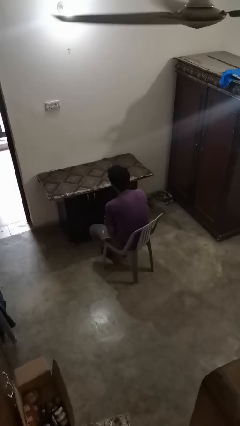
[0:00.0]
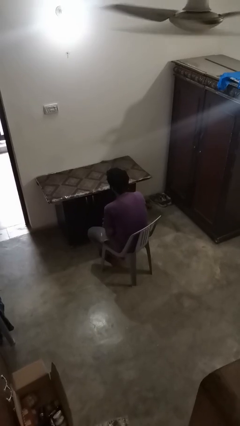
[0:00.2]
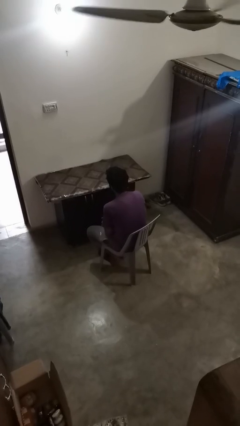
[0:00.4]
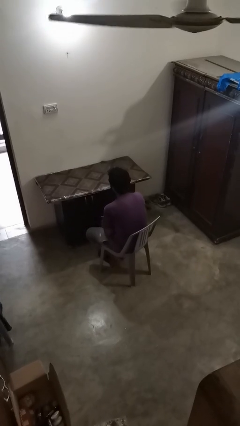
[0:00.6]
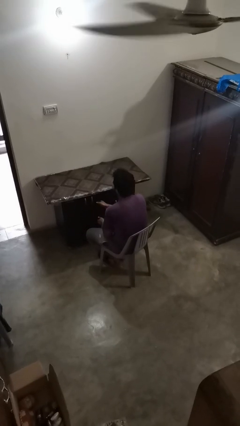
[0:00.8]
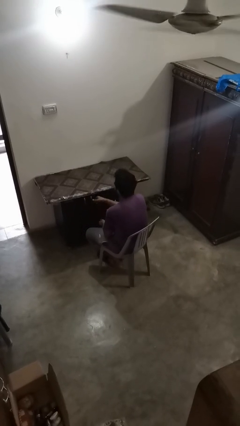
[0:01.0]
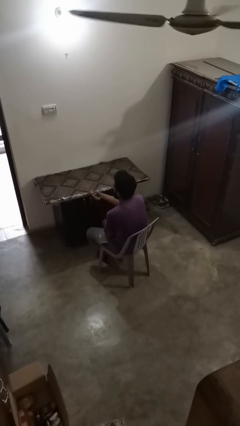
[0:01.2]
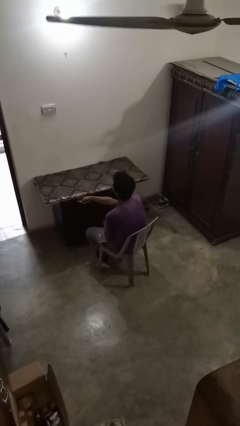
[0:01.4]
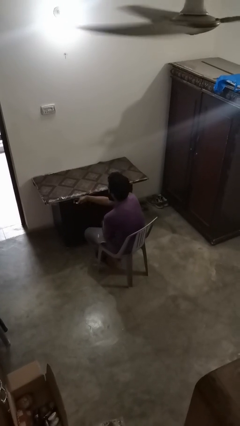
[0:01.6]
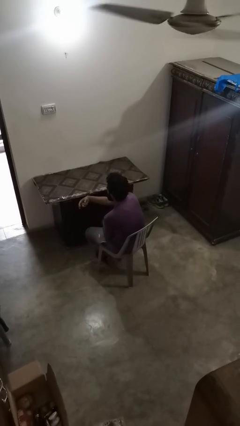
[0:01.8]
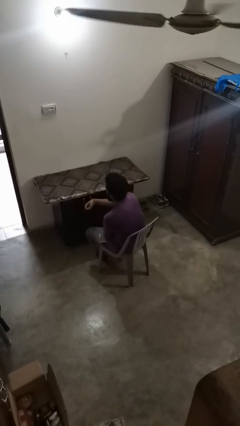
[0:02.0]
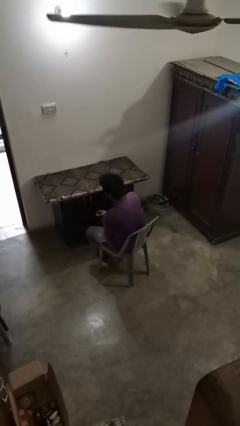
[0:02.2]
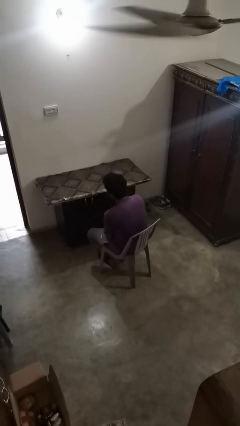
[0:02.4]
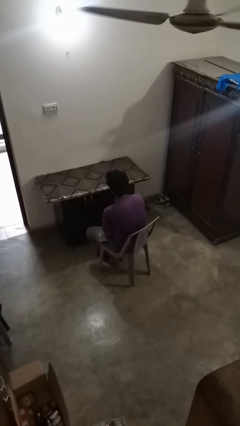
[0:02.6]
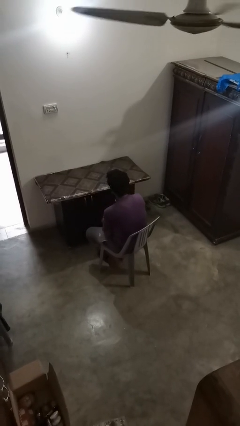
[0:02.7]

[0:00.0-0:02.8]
person knocks over furniture

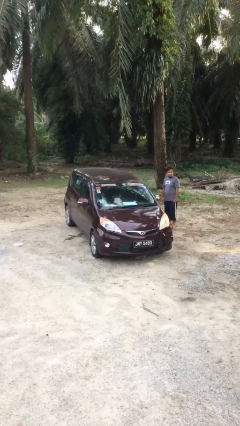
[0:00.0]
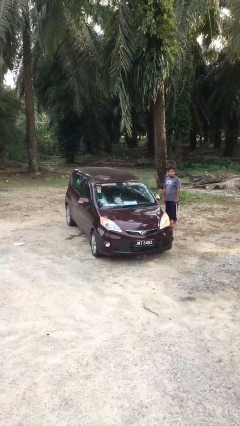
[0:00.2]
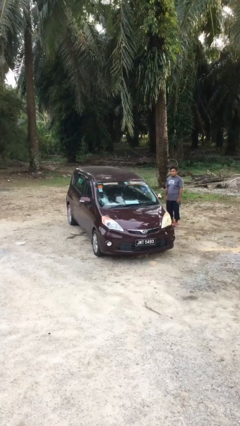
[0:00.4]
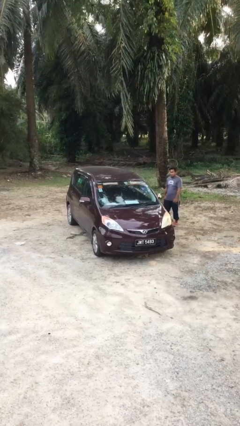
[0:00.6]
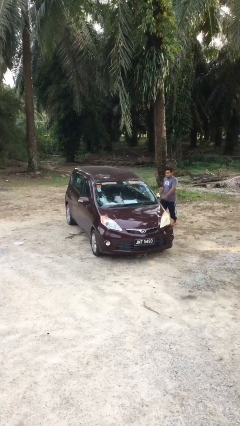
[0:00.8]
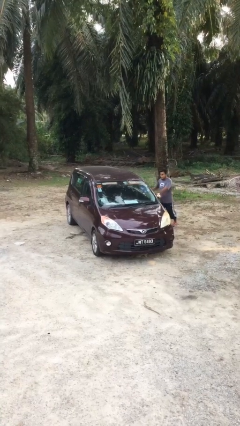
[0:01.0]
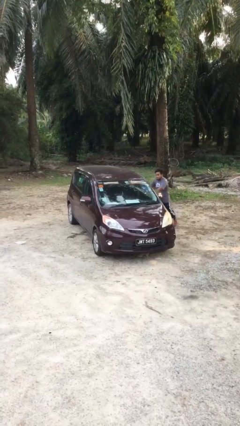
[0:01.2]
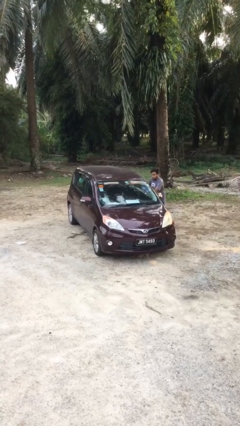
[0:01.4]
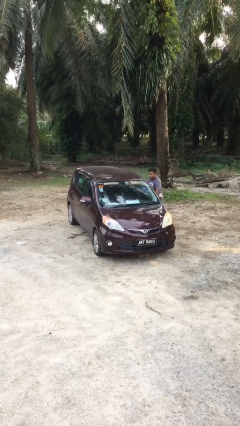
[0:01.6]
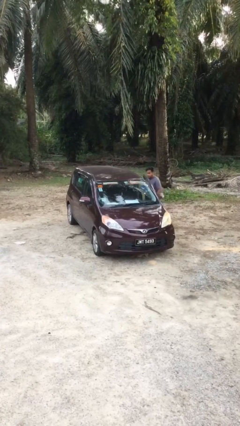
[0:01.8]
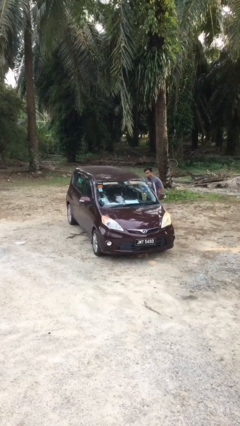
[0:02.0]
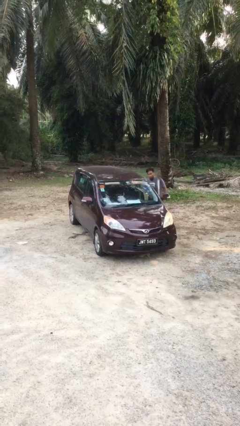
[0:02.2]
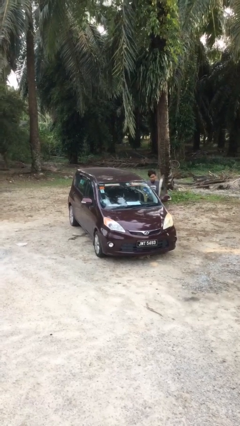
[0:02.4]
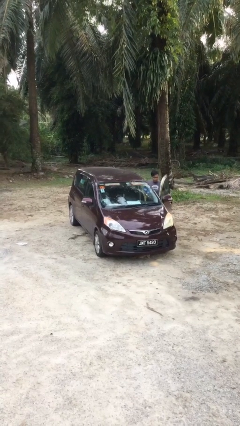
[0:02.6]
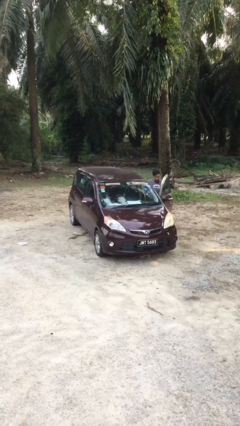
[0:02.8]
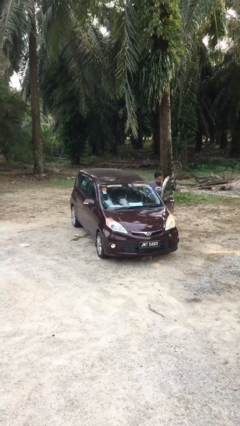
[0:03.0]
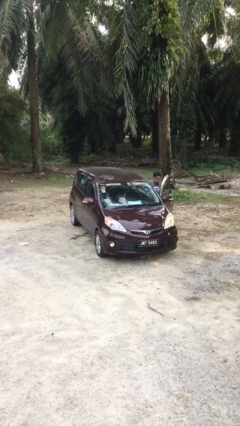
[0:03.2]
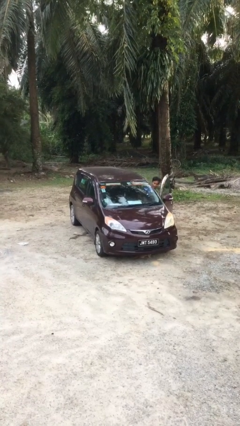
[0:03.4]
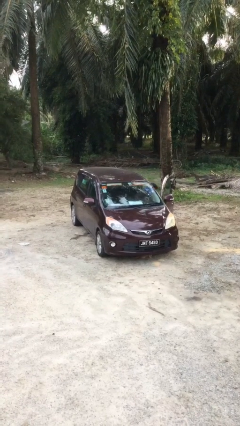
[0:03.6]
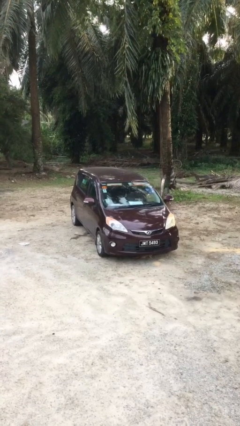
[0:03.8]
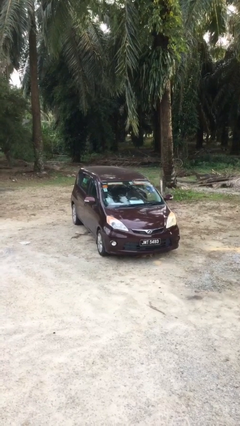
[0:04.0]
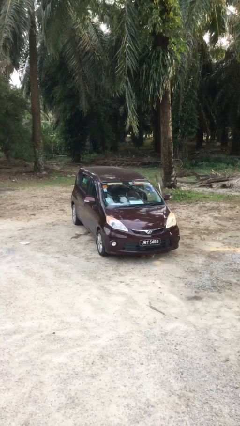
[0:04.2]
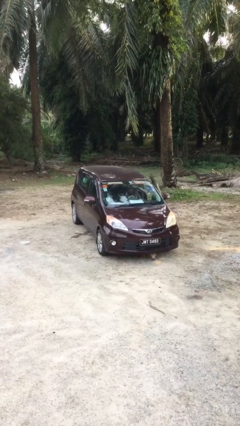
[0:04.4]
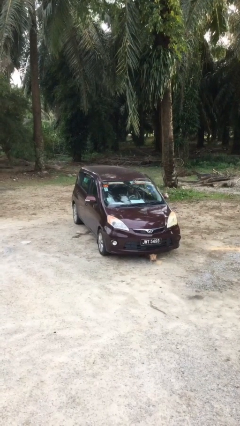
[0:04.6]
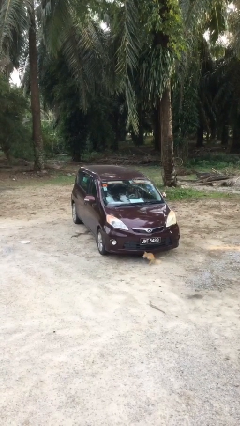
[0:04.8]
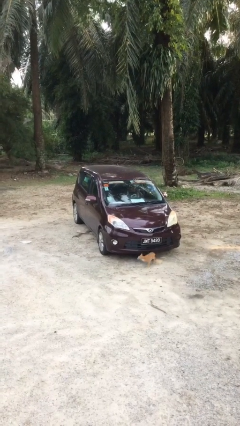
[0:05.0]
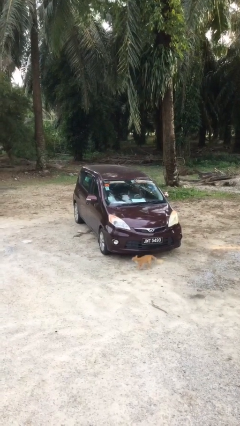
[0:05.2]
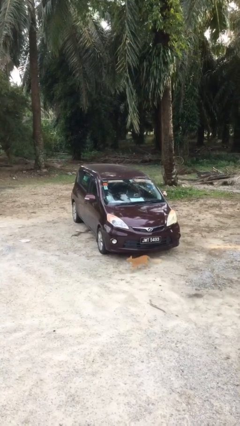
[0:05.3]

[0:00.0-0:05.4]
car picks up person

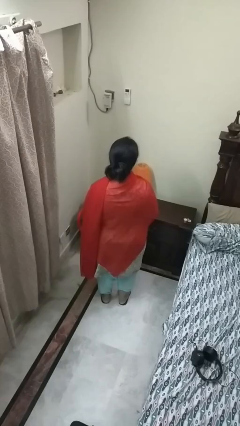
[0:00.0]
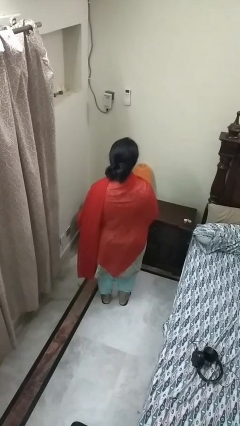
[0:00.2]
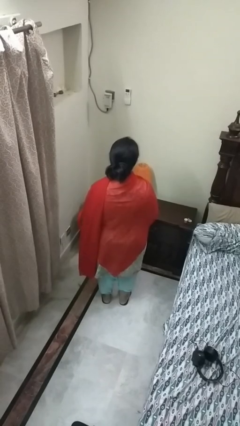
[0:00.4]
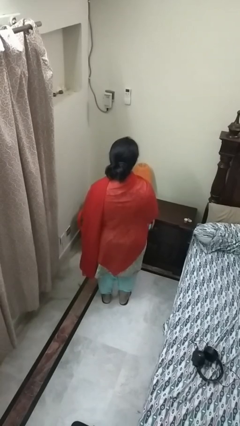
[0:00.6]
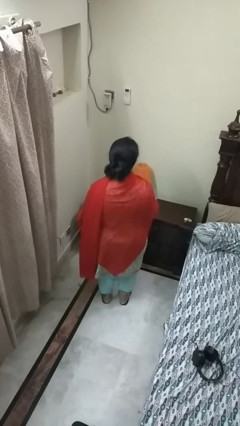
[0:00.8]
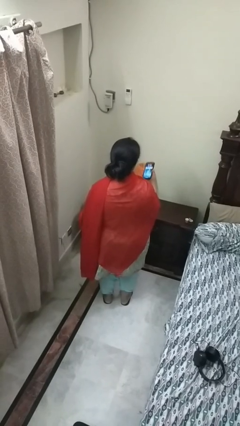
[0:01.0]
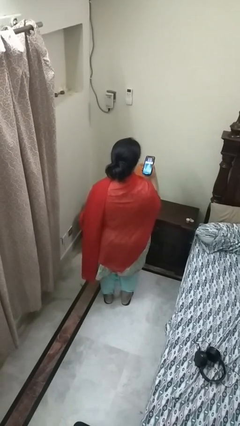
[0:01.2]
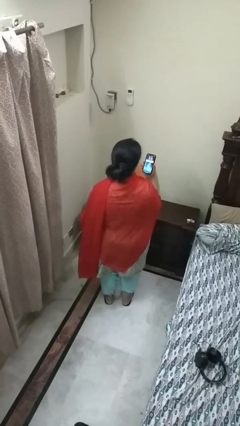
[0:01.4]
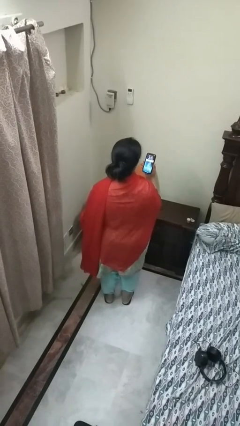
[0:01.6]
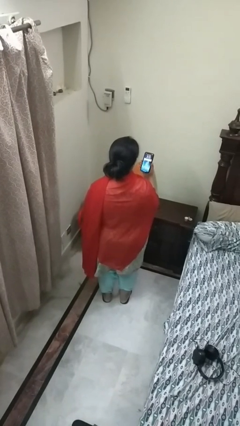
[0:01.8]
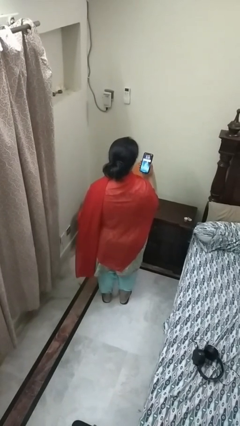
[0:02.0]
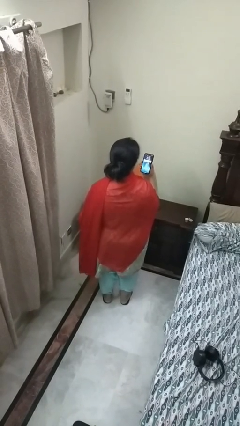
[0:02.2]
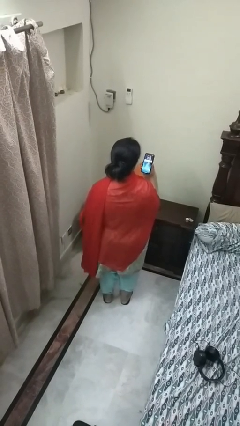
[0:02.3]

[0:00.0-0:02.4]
person takes phone from pocket

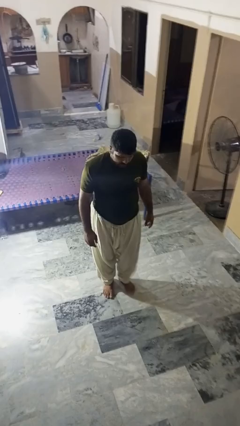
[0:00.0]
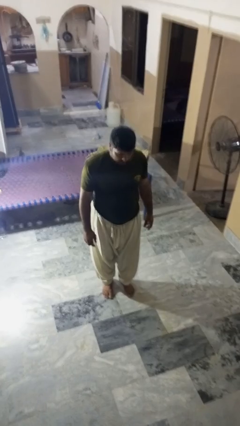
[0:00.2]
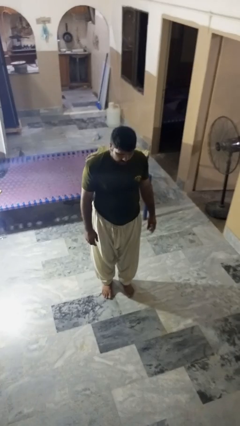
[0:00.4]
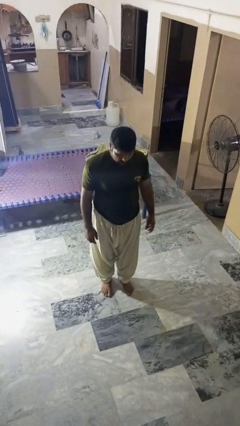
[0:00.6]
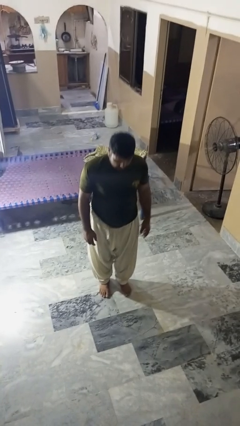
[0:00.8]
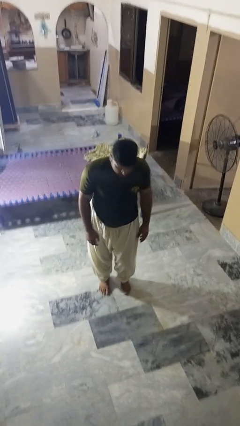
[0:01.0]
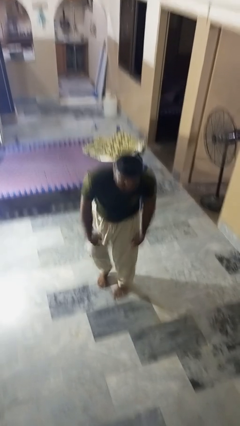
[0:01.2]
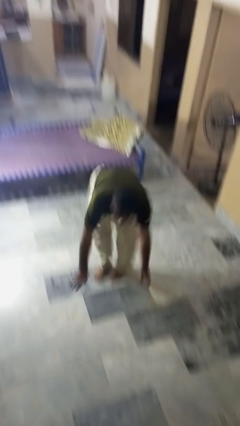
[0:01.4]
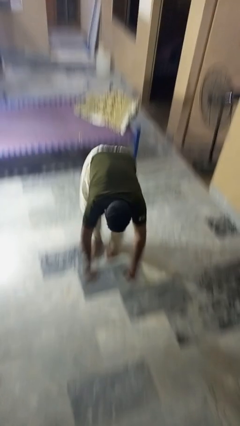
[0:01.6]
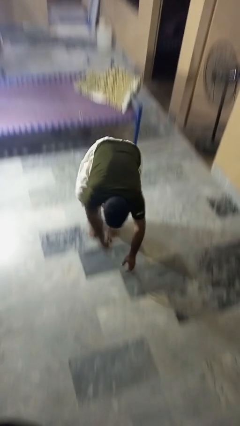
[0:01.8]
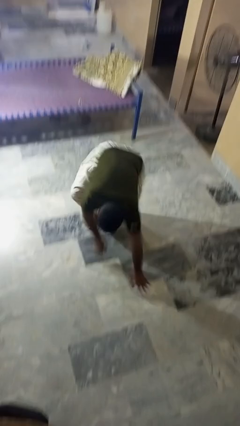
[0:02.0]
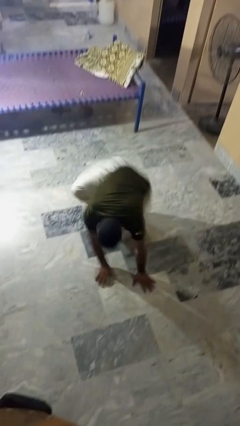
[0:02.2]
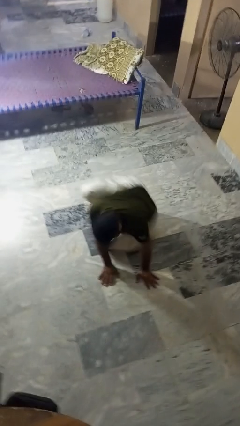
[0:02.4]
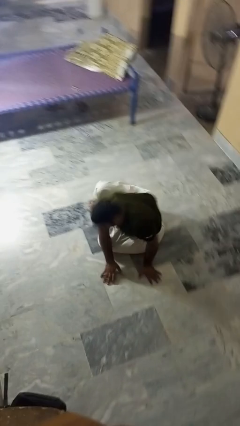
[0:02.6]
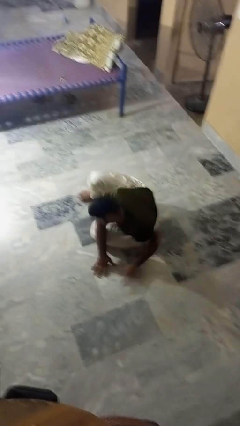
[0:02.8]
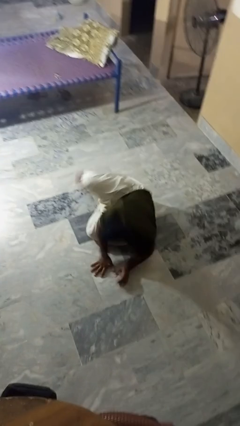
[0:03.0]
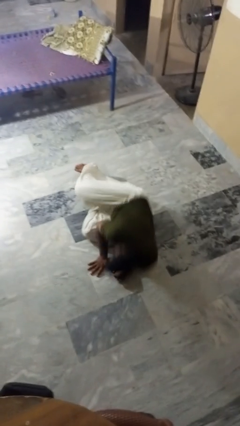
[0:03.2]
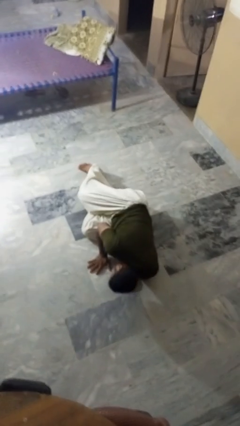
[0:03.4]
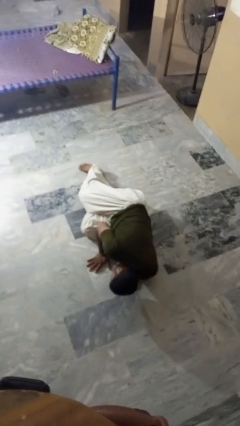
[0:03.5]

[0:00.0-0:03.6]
person falls while standing

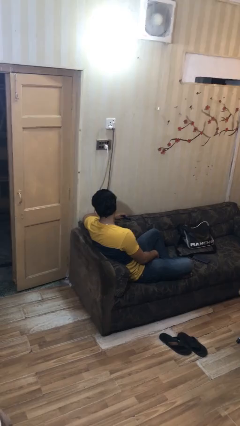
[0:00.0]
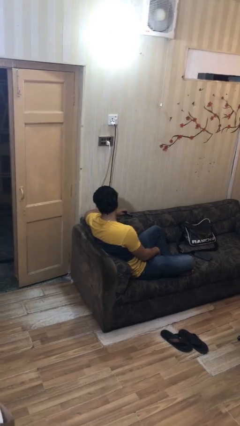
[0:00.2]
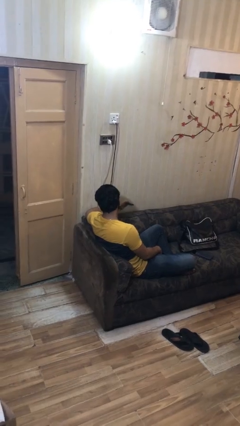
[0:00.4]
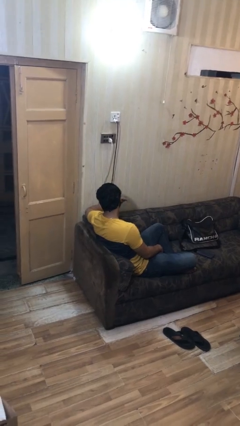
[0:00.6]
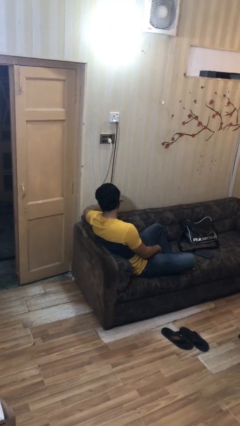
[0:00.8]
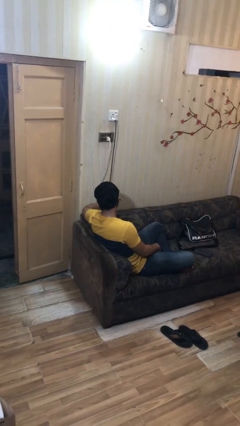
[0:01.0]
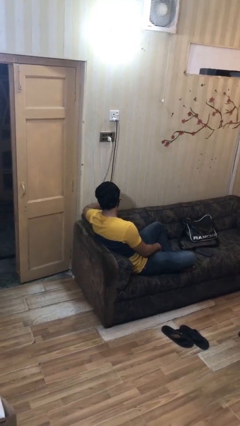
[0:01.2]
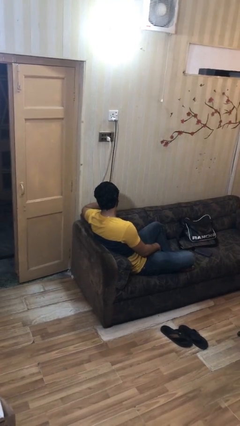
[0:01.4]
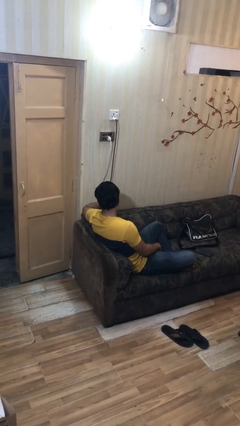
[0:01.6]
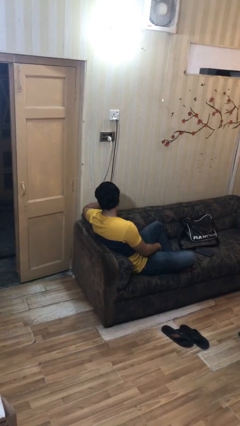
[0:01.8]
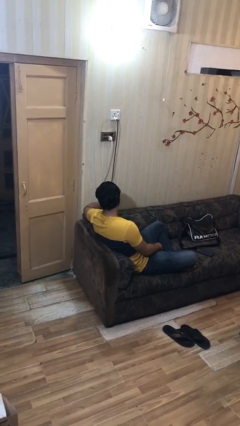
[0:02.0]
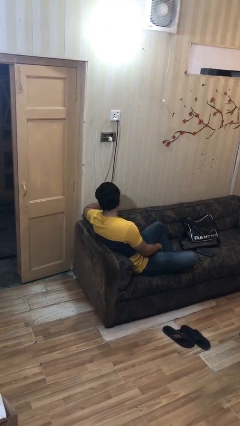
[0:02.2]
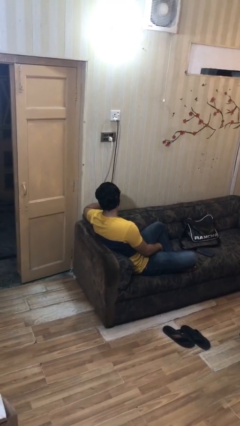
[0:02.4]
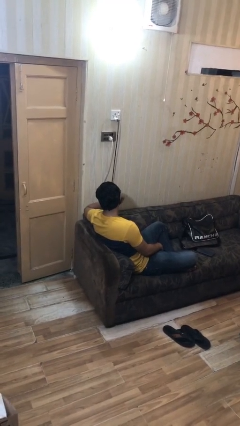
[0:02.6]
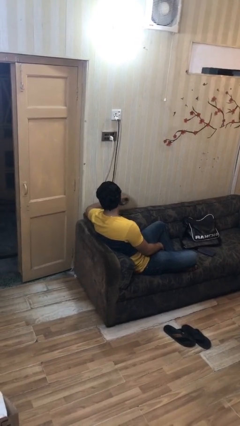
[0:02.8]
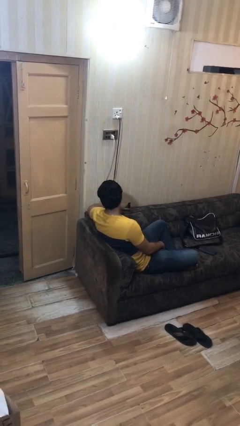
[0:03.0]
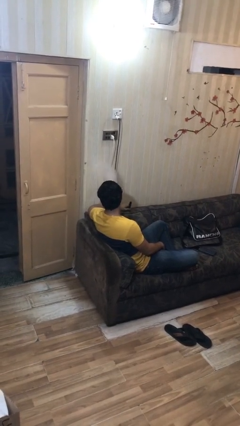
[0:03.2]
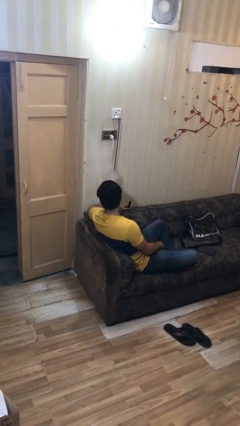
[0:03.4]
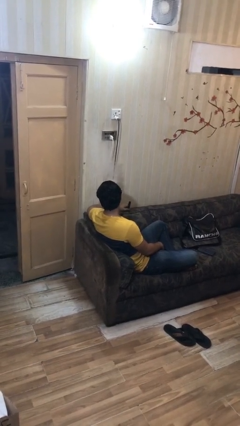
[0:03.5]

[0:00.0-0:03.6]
person vapes
